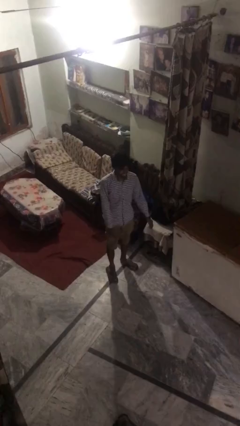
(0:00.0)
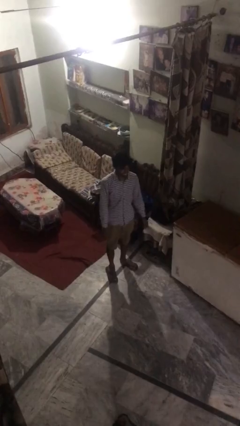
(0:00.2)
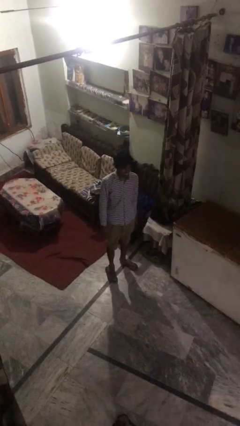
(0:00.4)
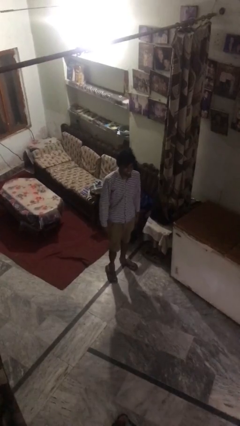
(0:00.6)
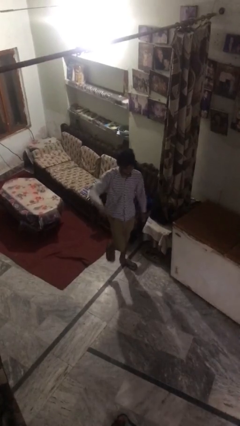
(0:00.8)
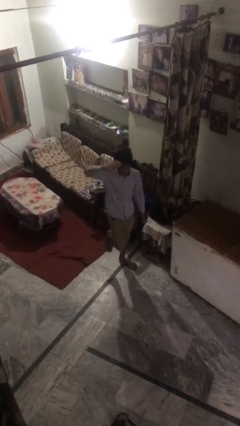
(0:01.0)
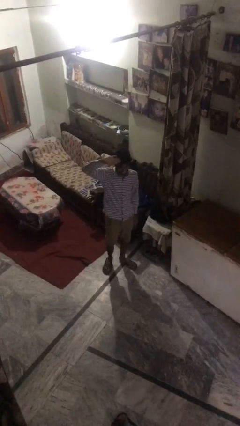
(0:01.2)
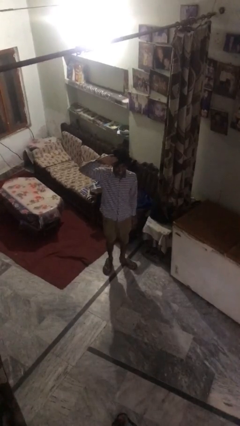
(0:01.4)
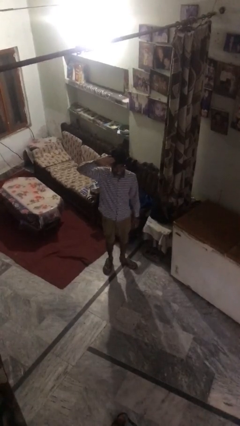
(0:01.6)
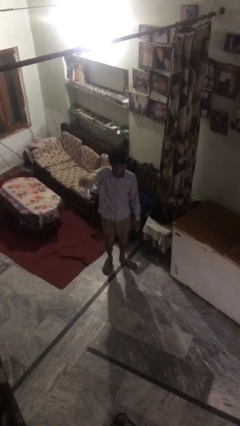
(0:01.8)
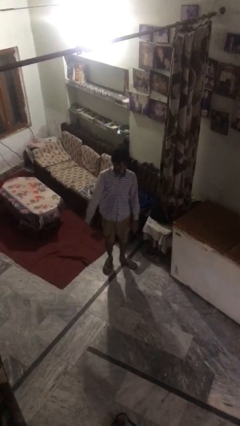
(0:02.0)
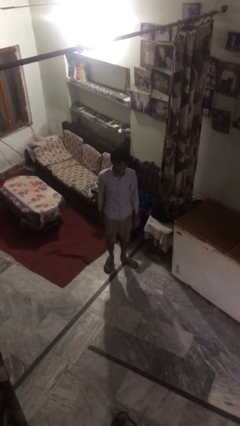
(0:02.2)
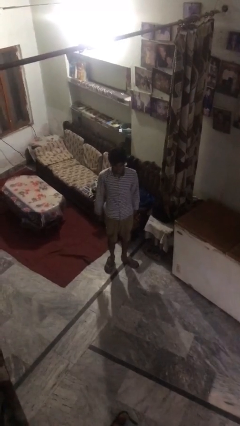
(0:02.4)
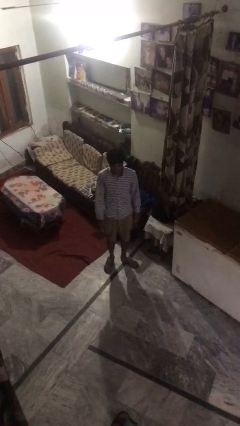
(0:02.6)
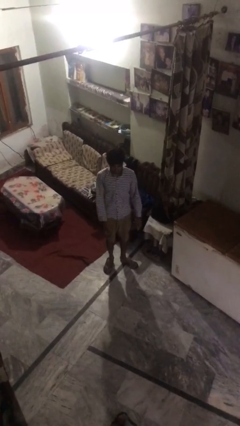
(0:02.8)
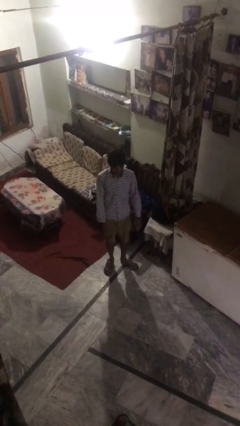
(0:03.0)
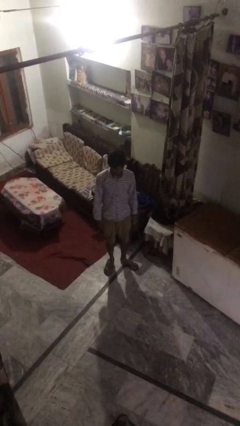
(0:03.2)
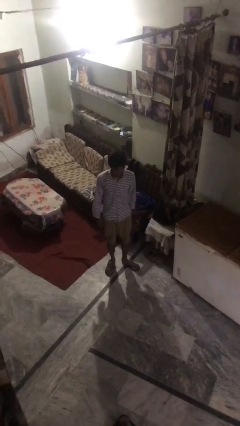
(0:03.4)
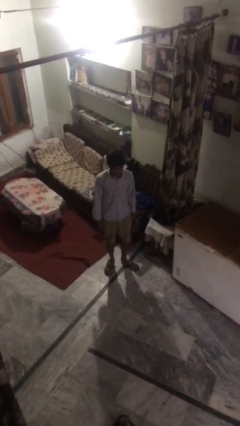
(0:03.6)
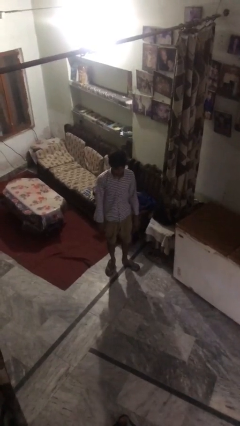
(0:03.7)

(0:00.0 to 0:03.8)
person salutes

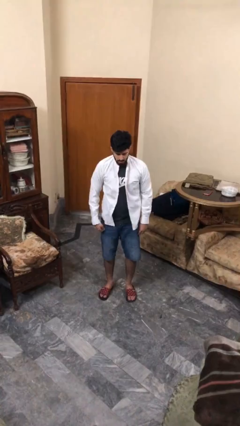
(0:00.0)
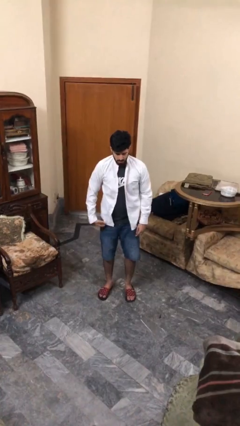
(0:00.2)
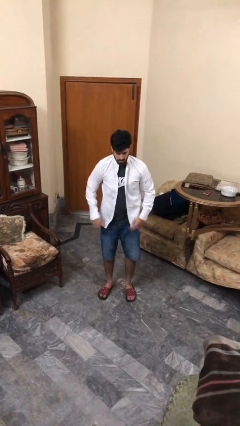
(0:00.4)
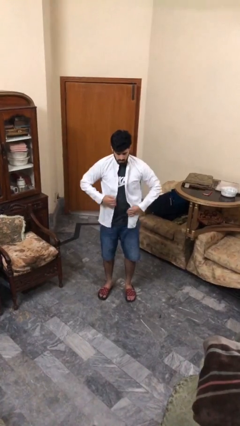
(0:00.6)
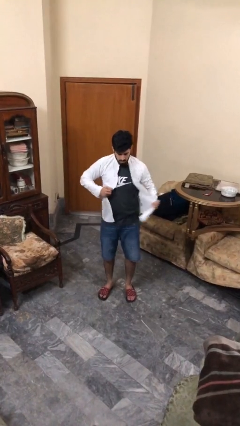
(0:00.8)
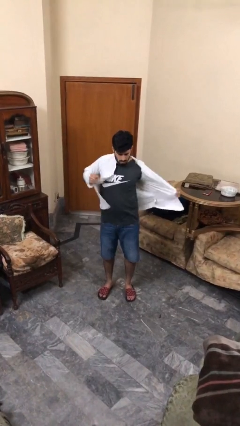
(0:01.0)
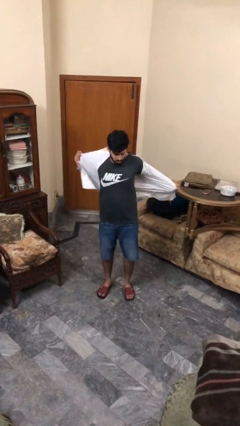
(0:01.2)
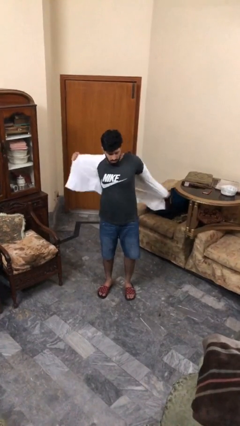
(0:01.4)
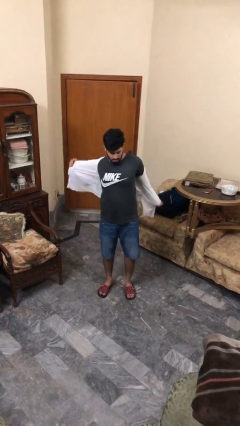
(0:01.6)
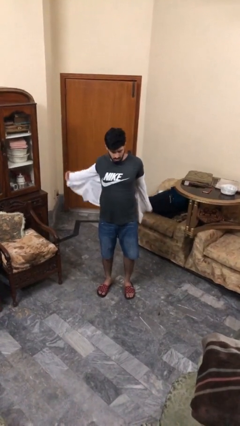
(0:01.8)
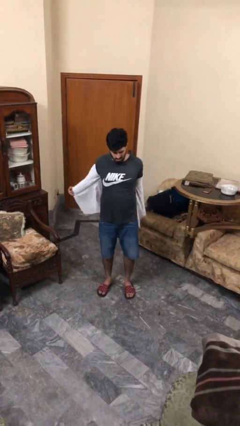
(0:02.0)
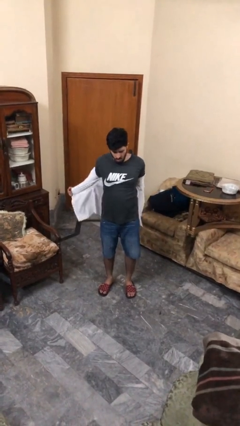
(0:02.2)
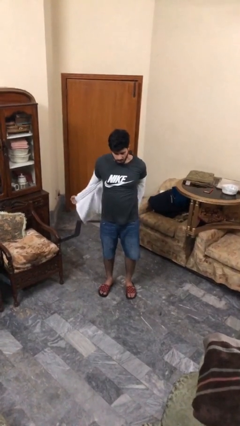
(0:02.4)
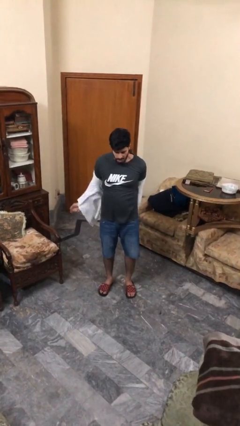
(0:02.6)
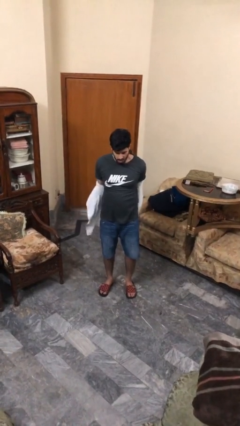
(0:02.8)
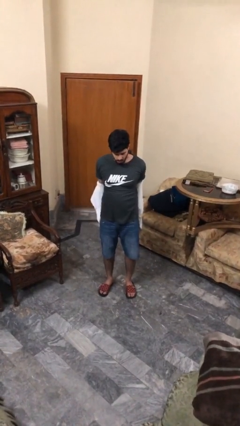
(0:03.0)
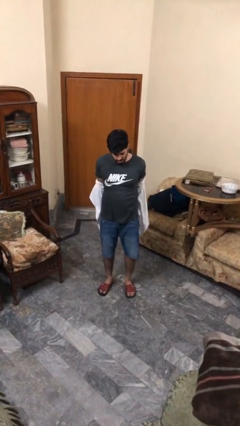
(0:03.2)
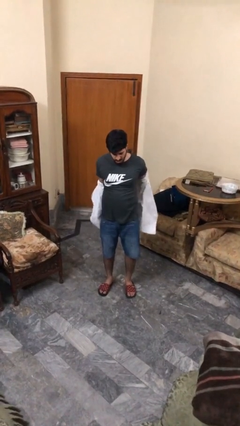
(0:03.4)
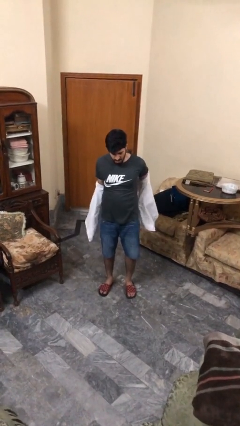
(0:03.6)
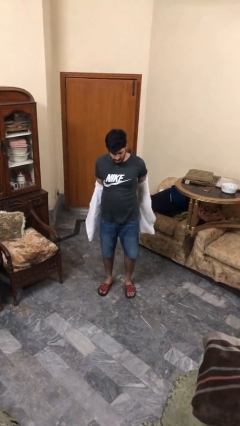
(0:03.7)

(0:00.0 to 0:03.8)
person takes off shirt

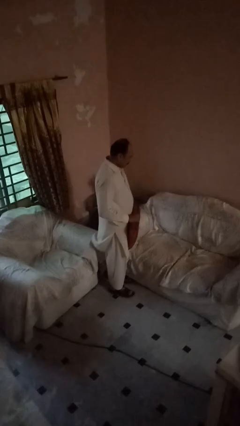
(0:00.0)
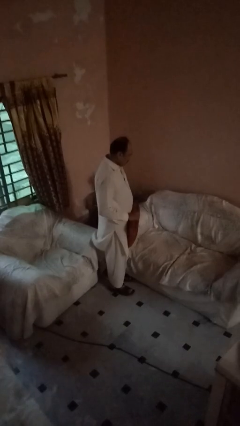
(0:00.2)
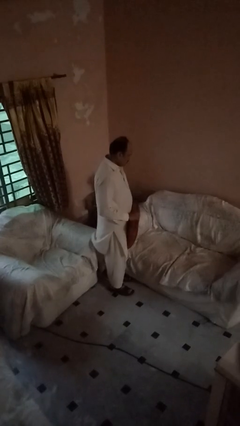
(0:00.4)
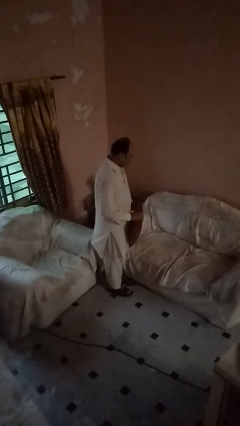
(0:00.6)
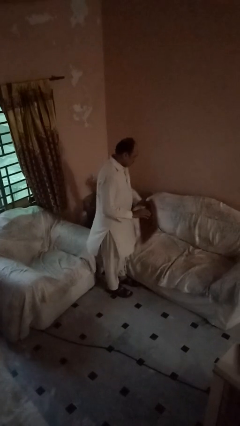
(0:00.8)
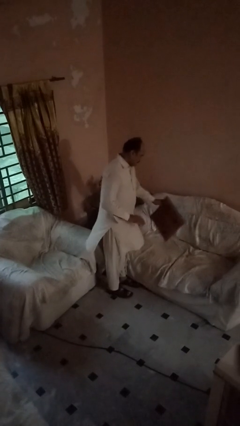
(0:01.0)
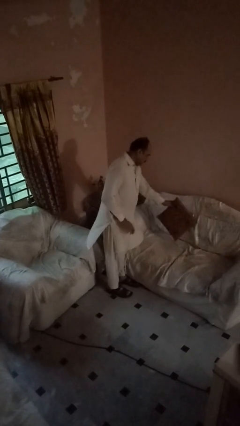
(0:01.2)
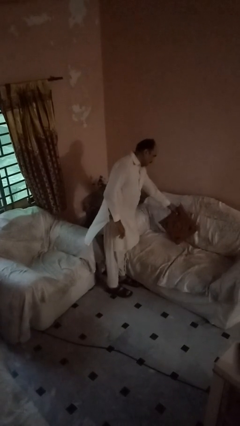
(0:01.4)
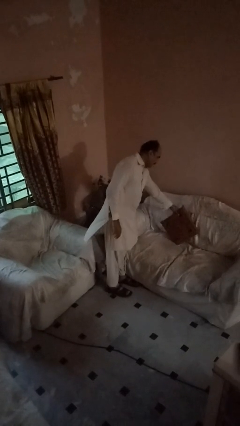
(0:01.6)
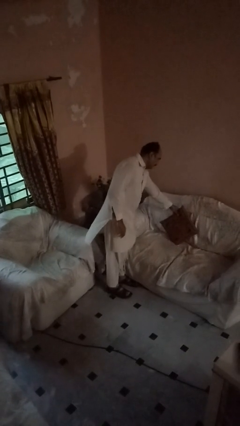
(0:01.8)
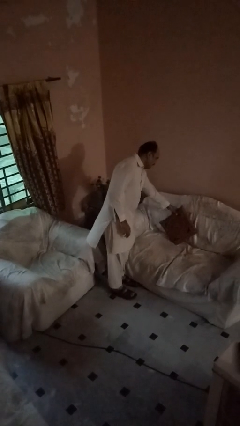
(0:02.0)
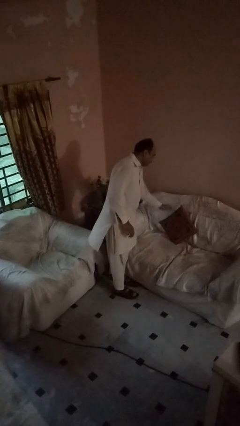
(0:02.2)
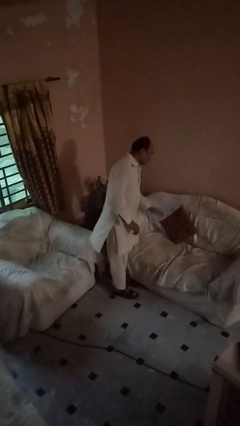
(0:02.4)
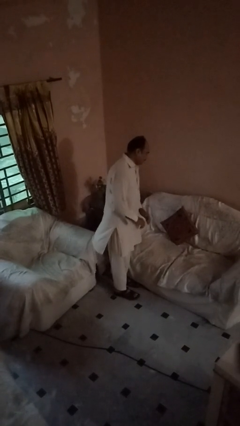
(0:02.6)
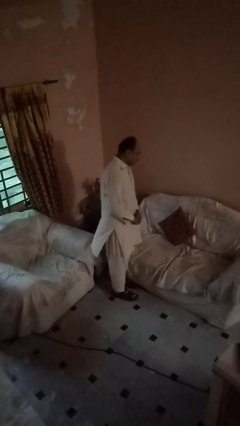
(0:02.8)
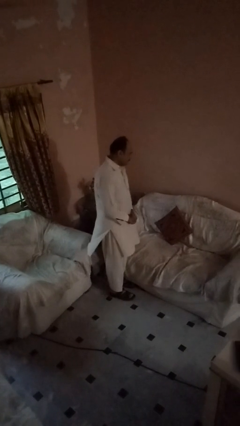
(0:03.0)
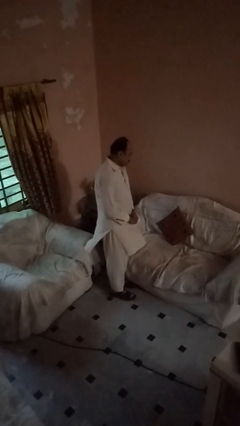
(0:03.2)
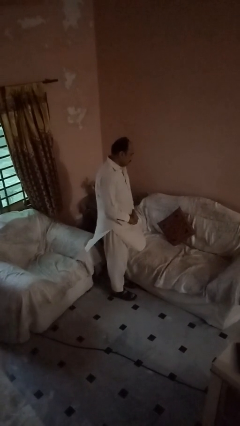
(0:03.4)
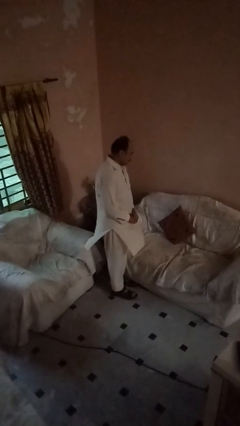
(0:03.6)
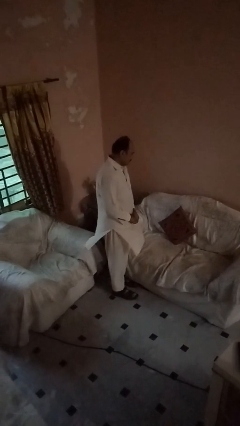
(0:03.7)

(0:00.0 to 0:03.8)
person puts down object on couch

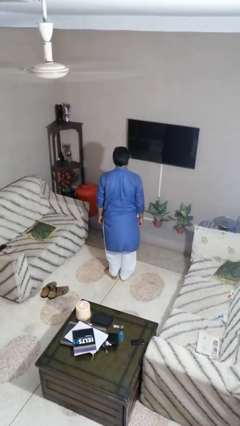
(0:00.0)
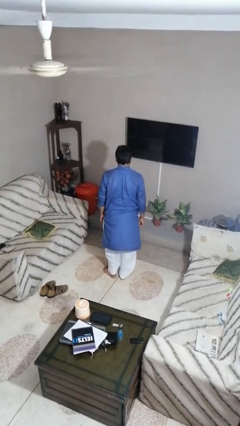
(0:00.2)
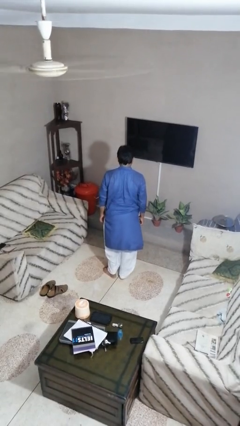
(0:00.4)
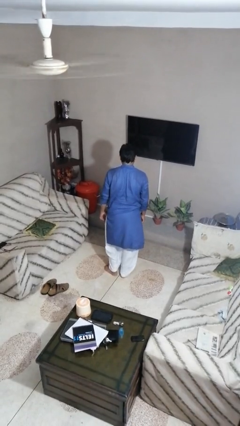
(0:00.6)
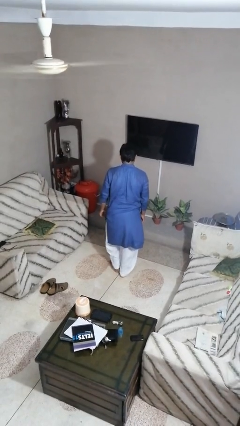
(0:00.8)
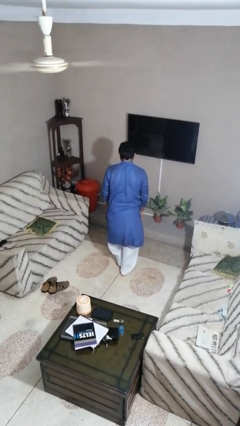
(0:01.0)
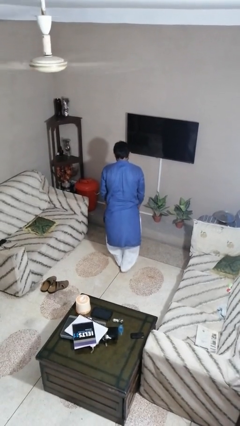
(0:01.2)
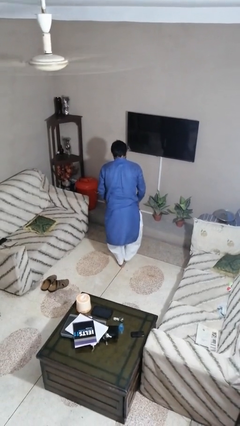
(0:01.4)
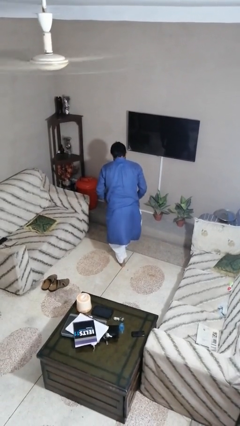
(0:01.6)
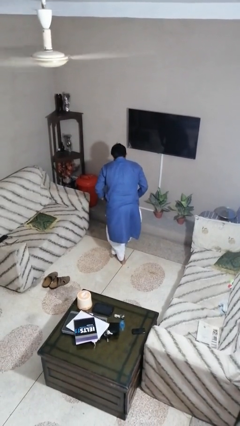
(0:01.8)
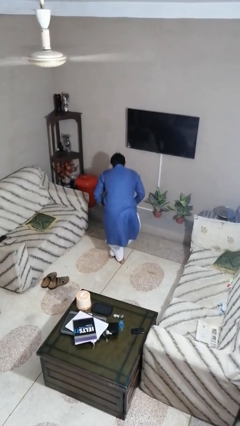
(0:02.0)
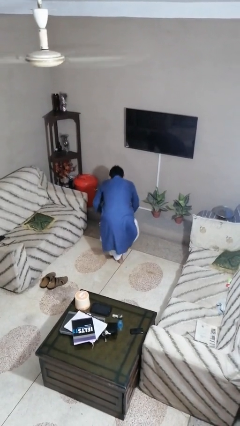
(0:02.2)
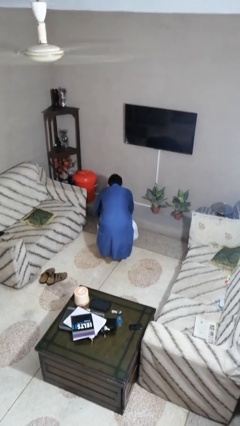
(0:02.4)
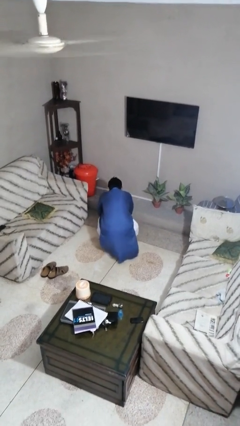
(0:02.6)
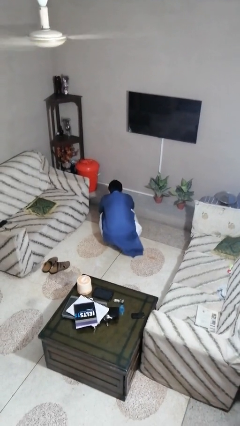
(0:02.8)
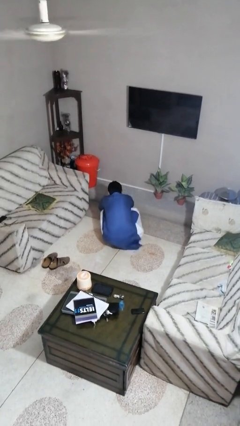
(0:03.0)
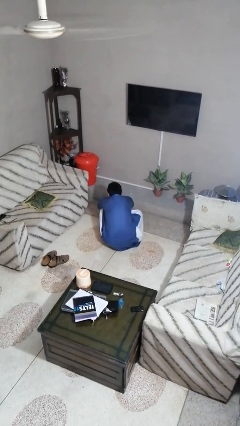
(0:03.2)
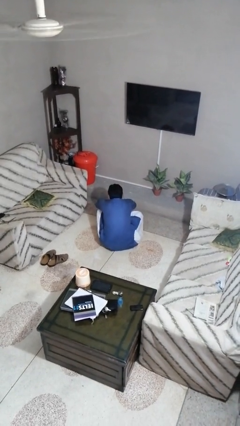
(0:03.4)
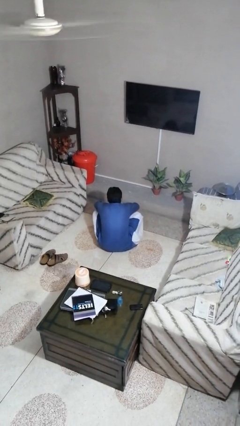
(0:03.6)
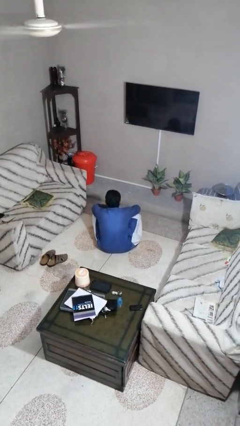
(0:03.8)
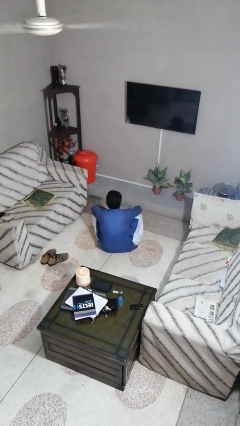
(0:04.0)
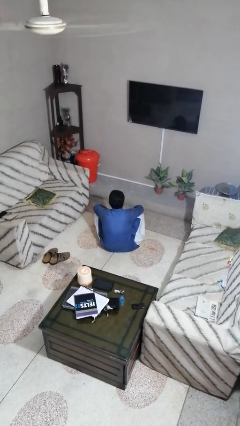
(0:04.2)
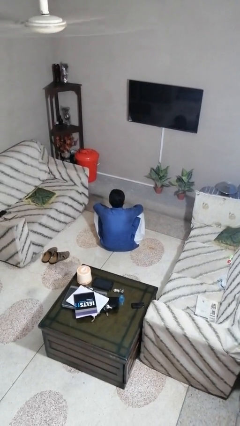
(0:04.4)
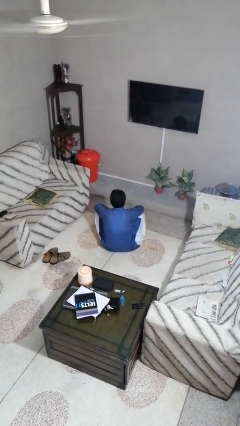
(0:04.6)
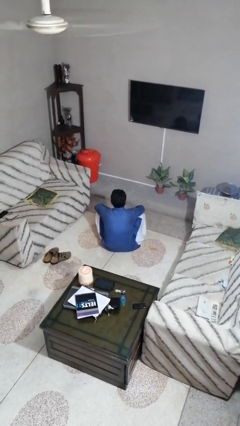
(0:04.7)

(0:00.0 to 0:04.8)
person sits crisscross

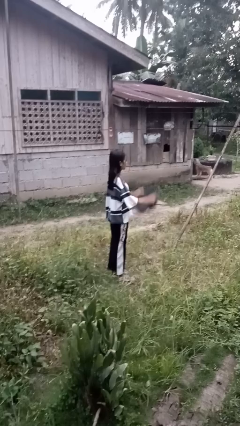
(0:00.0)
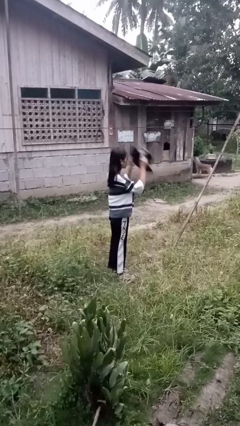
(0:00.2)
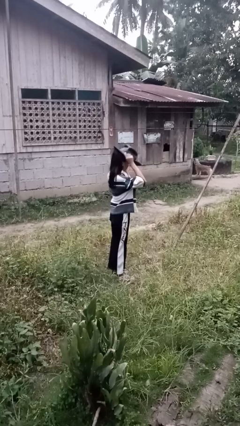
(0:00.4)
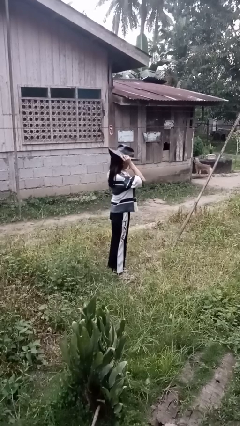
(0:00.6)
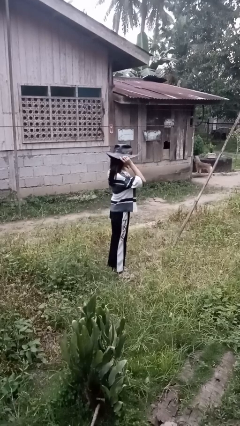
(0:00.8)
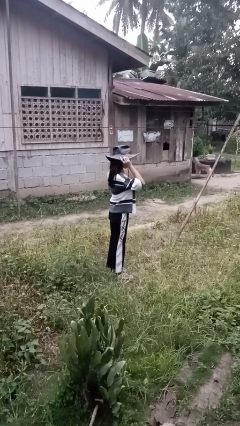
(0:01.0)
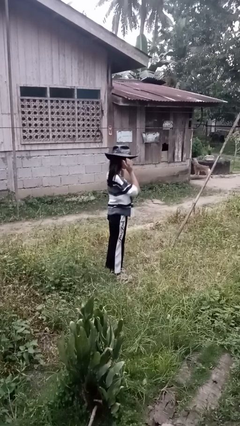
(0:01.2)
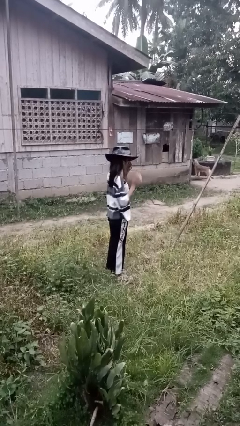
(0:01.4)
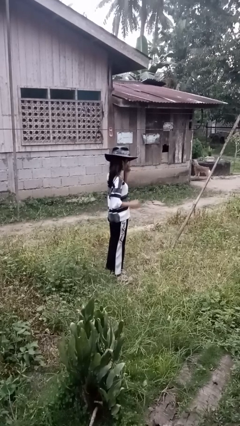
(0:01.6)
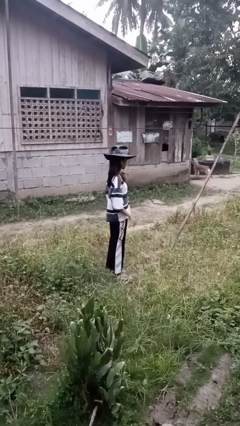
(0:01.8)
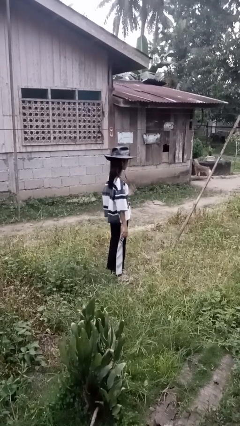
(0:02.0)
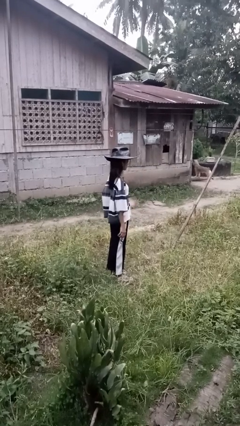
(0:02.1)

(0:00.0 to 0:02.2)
person puts on hat
